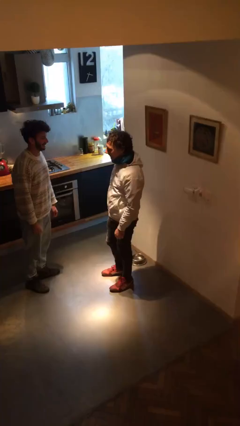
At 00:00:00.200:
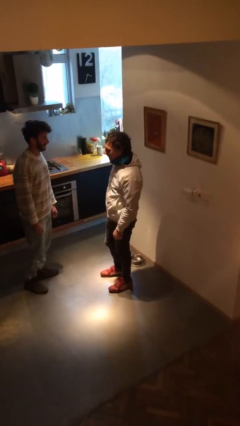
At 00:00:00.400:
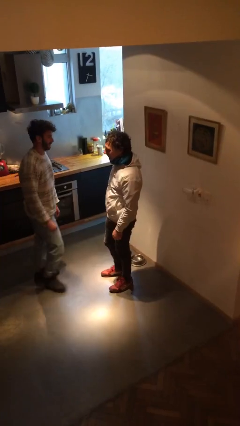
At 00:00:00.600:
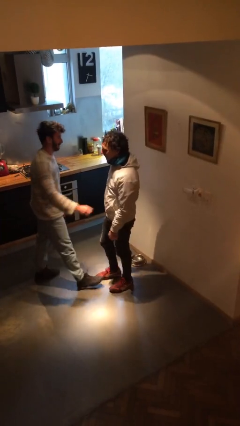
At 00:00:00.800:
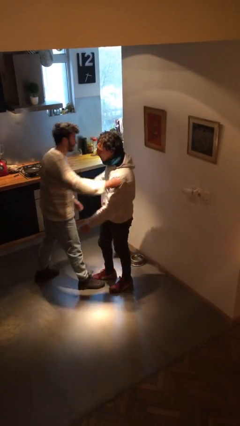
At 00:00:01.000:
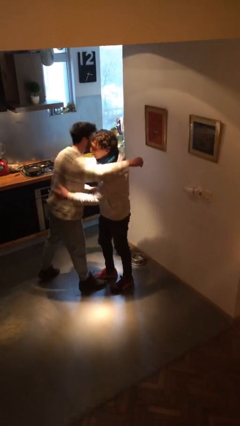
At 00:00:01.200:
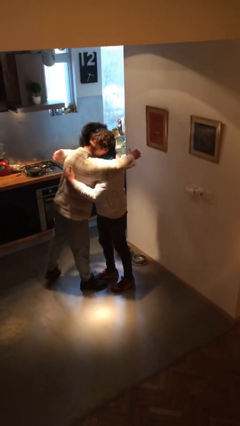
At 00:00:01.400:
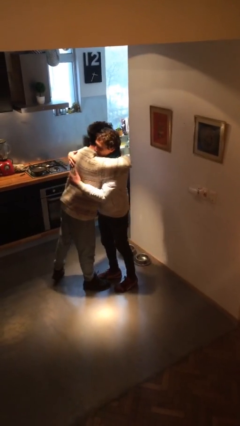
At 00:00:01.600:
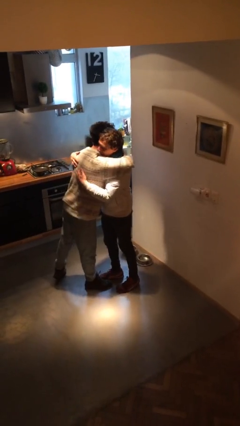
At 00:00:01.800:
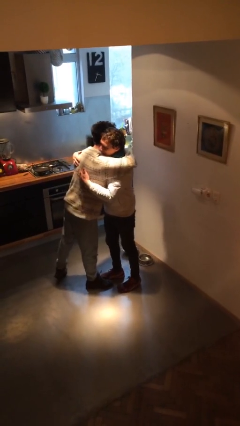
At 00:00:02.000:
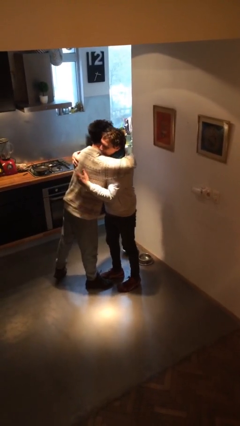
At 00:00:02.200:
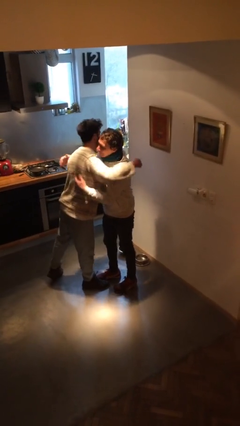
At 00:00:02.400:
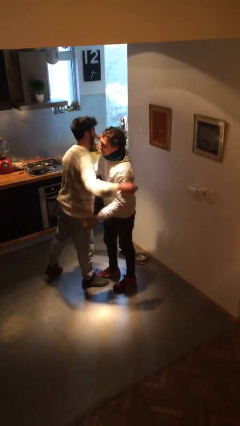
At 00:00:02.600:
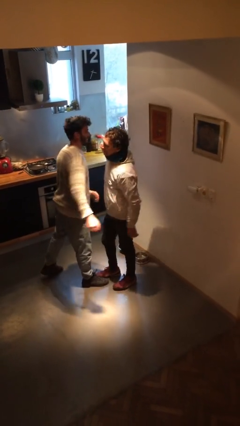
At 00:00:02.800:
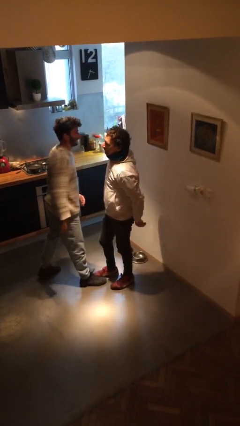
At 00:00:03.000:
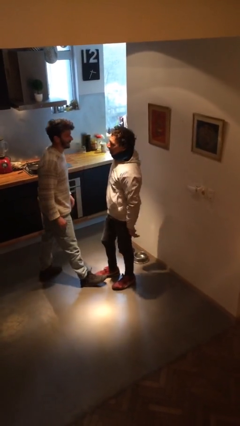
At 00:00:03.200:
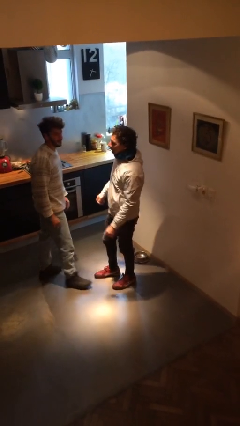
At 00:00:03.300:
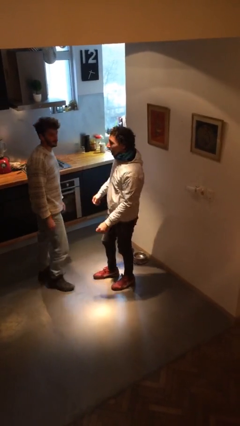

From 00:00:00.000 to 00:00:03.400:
person embraces person

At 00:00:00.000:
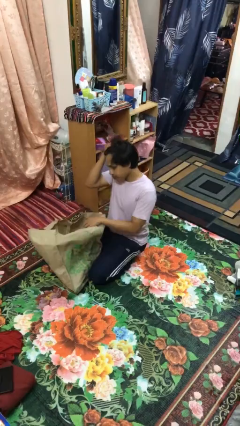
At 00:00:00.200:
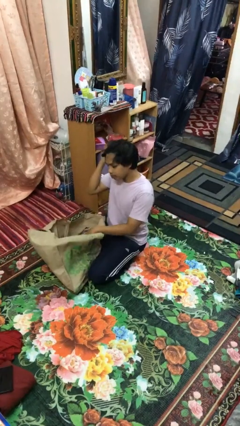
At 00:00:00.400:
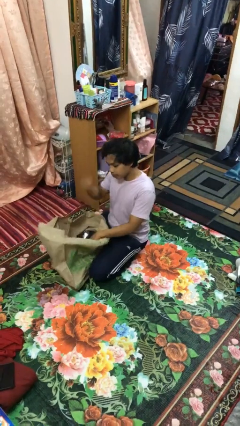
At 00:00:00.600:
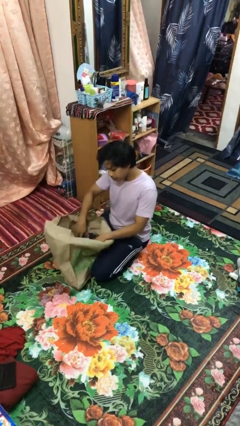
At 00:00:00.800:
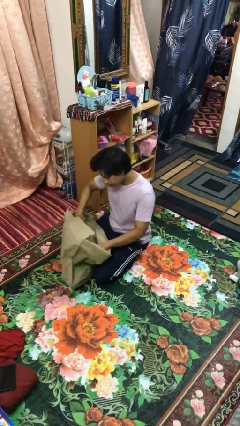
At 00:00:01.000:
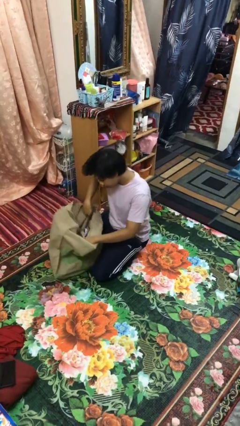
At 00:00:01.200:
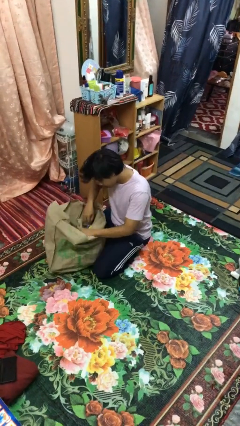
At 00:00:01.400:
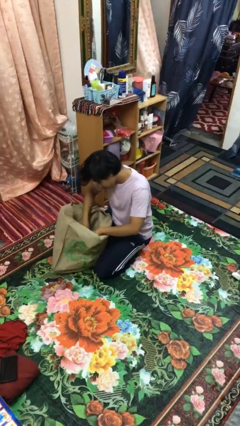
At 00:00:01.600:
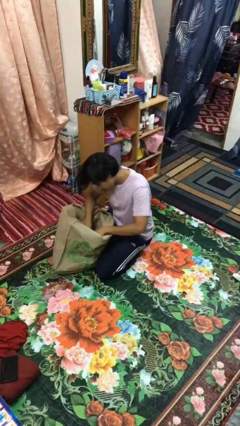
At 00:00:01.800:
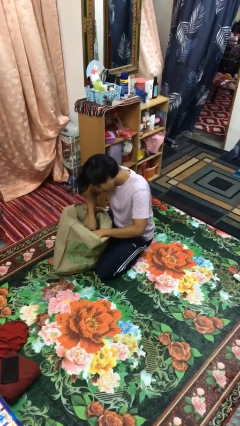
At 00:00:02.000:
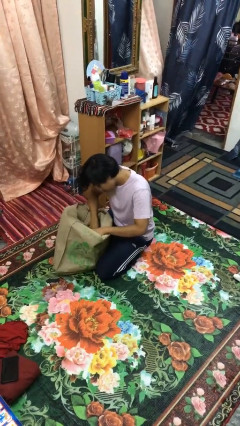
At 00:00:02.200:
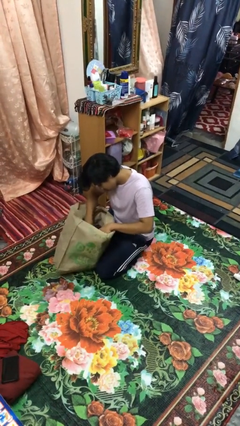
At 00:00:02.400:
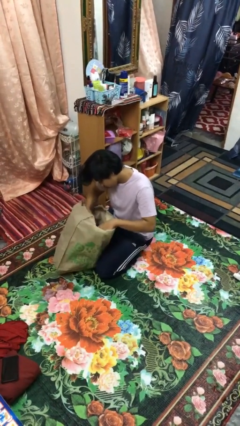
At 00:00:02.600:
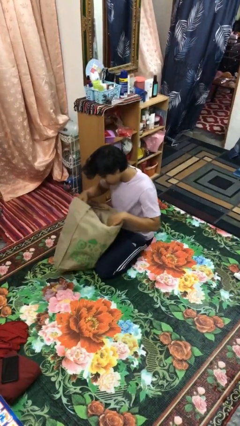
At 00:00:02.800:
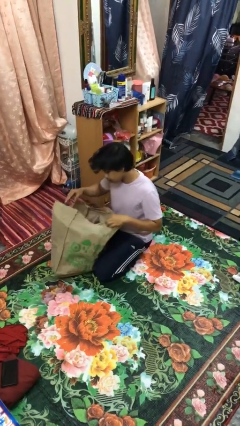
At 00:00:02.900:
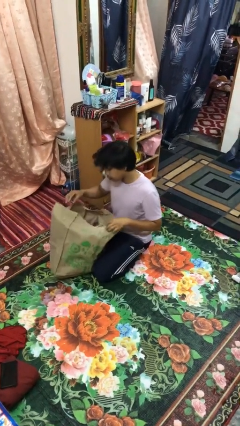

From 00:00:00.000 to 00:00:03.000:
person searches in bag

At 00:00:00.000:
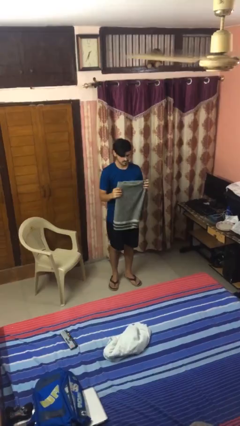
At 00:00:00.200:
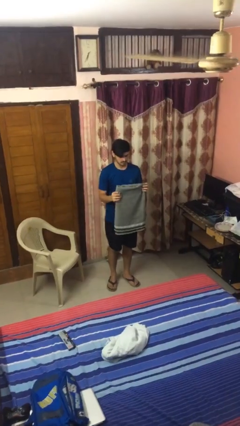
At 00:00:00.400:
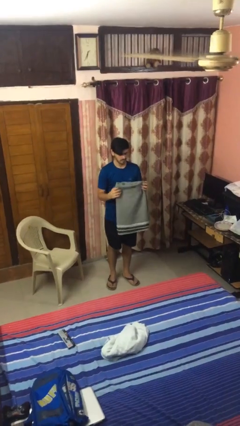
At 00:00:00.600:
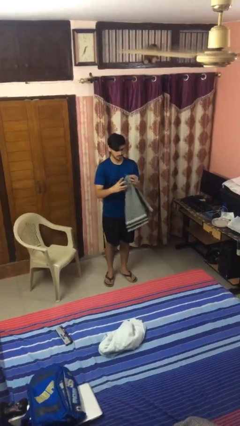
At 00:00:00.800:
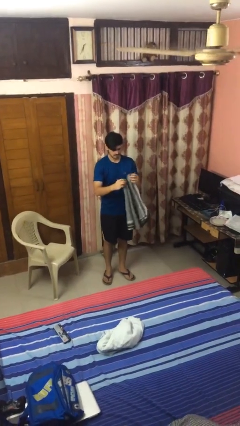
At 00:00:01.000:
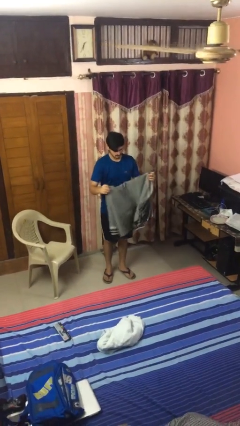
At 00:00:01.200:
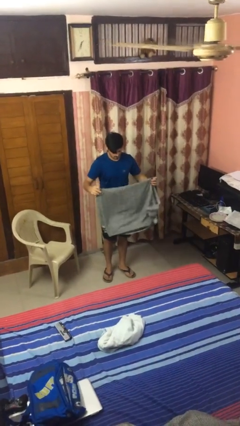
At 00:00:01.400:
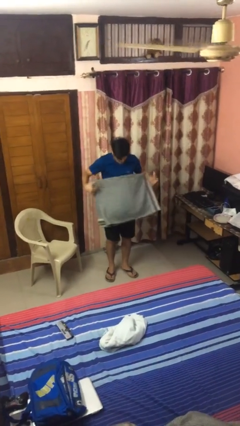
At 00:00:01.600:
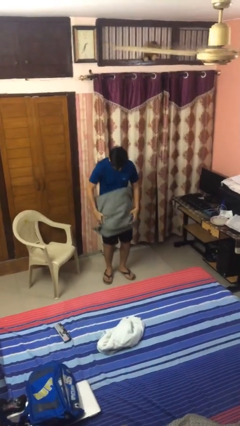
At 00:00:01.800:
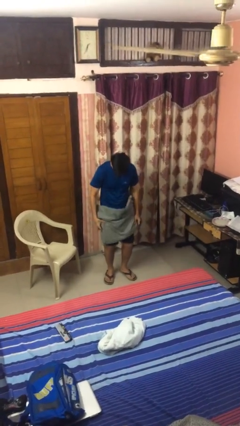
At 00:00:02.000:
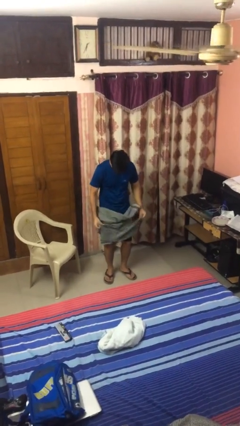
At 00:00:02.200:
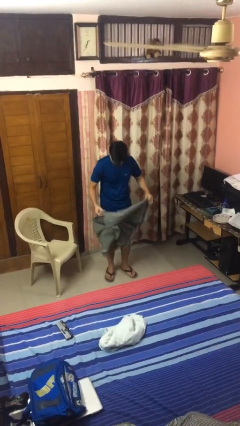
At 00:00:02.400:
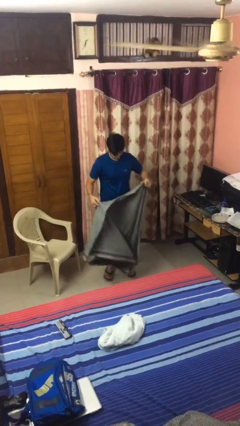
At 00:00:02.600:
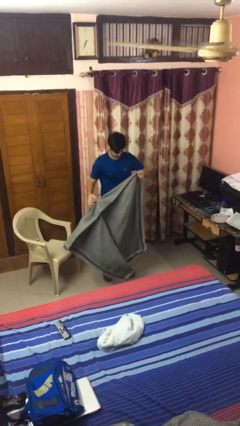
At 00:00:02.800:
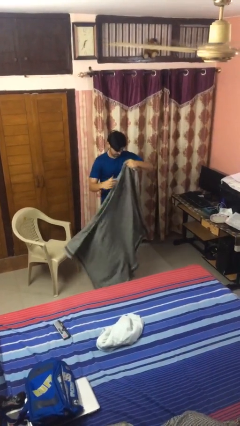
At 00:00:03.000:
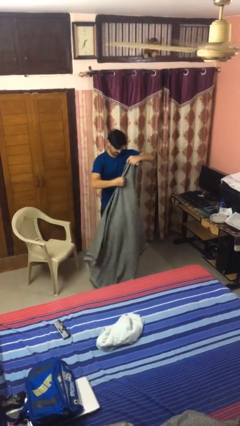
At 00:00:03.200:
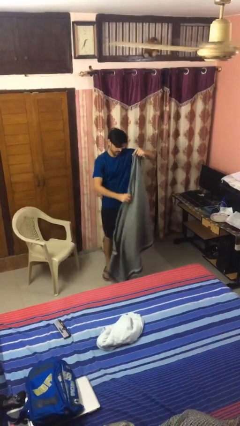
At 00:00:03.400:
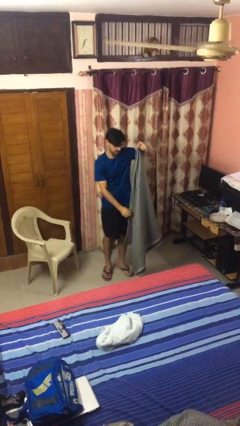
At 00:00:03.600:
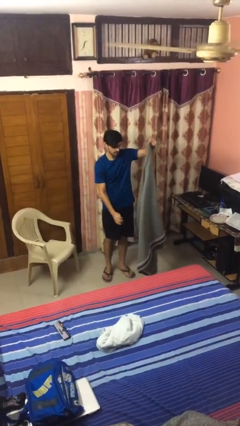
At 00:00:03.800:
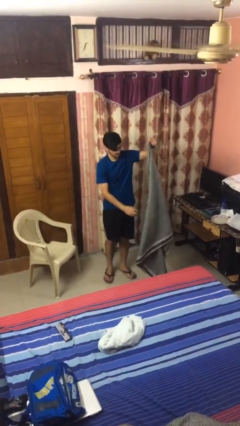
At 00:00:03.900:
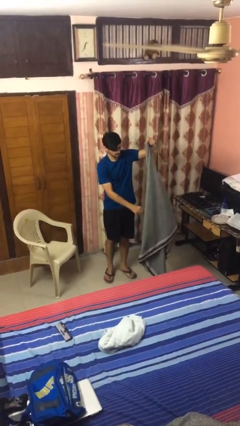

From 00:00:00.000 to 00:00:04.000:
person unfolds blanket

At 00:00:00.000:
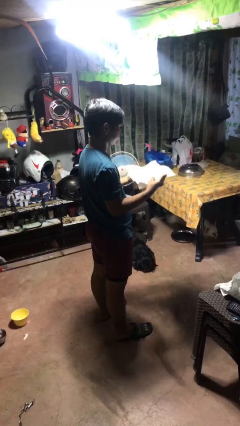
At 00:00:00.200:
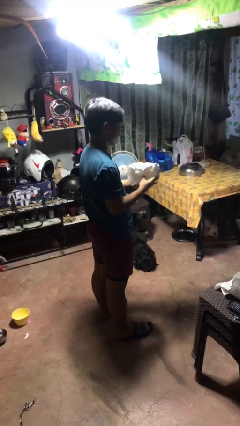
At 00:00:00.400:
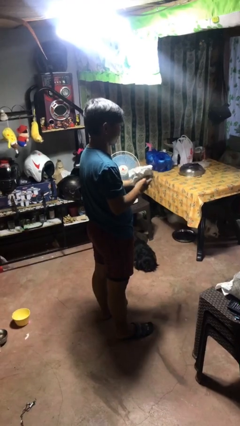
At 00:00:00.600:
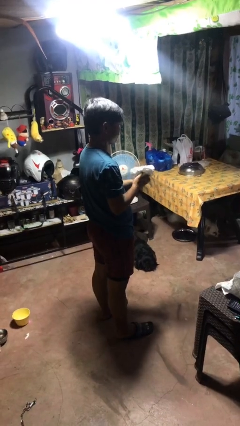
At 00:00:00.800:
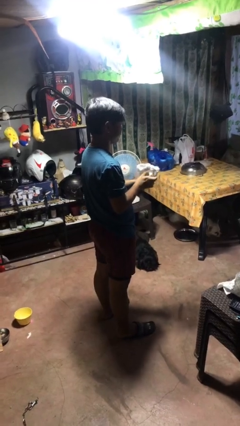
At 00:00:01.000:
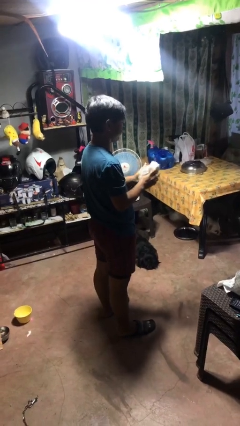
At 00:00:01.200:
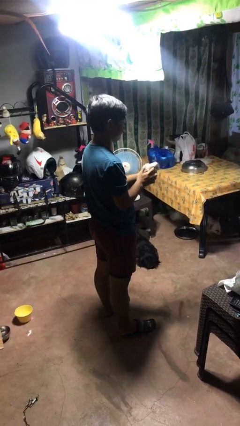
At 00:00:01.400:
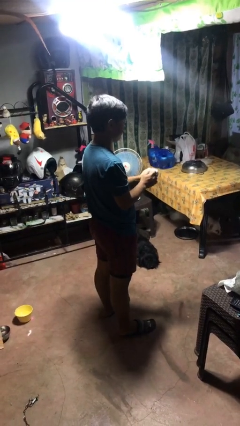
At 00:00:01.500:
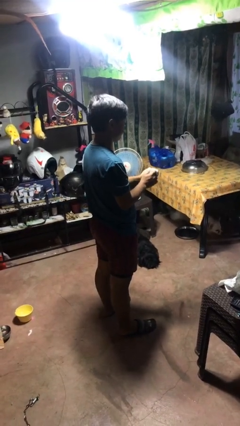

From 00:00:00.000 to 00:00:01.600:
person crumples paper

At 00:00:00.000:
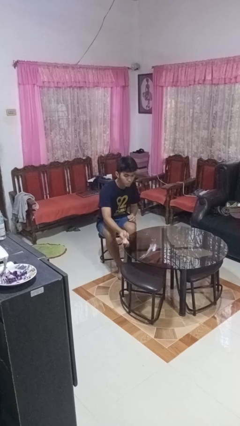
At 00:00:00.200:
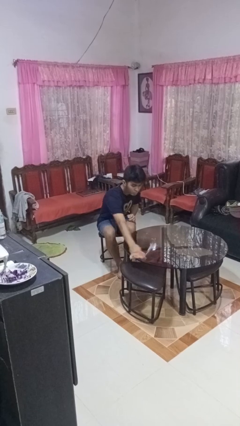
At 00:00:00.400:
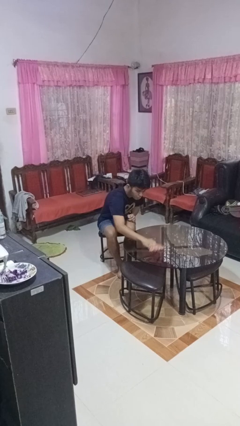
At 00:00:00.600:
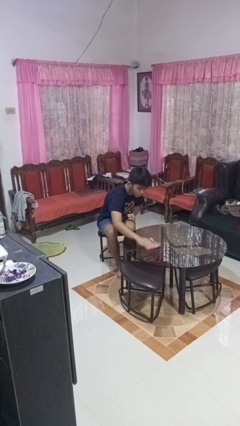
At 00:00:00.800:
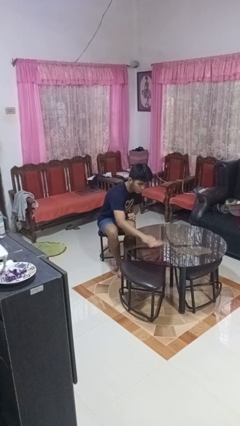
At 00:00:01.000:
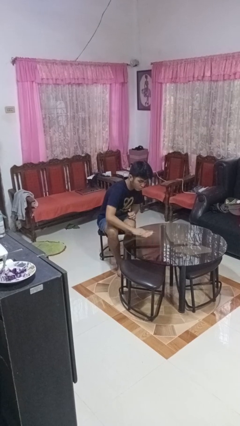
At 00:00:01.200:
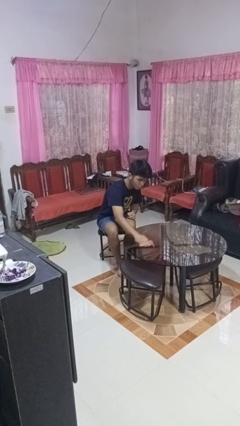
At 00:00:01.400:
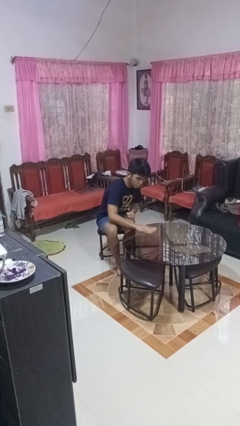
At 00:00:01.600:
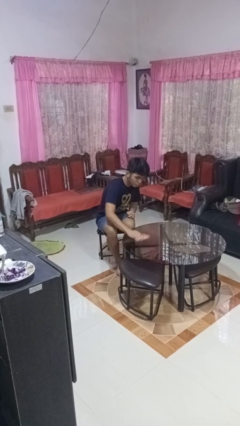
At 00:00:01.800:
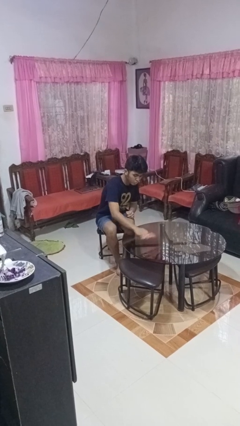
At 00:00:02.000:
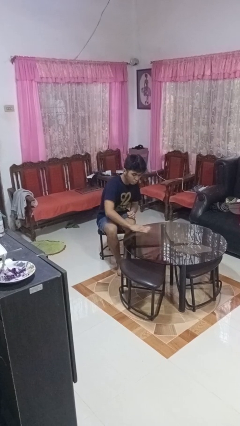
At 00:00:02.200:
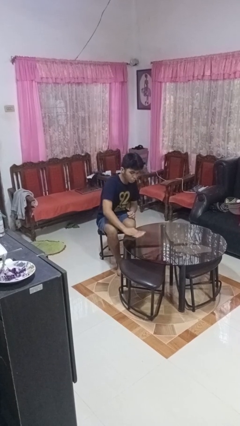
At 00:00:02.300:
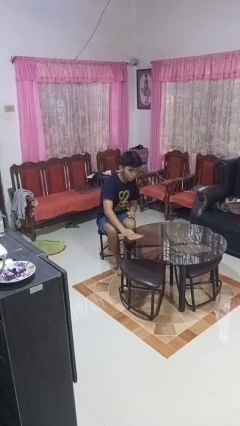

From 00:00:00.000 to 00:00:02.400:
person cleans table with rag

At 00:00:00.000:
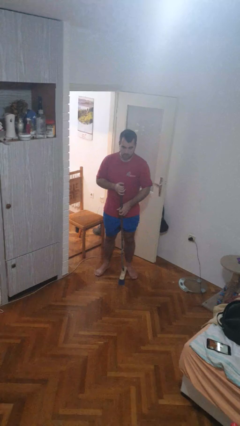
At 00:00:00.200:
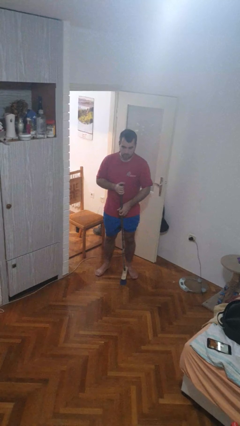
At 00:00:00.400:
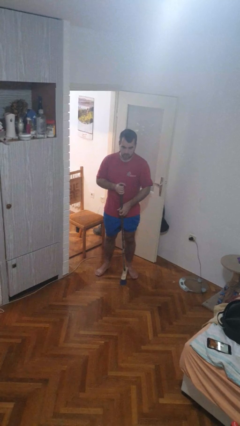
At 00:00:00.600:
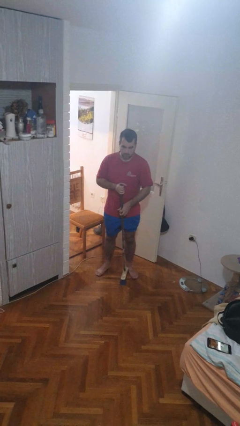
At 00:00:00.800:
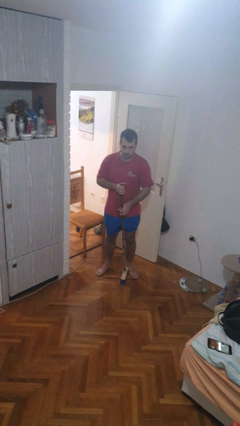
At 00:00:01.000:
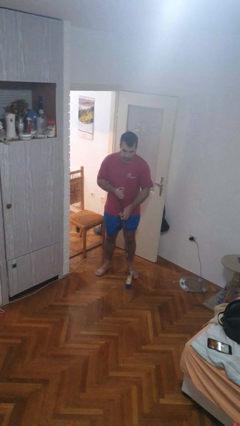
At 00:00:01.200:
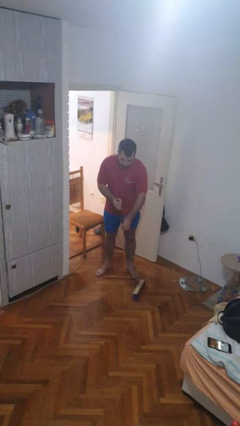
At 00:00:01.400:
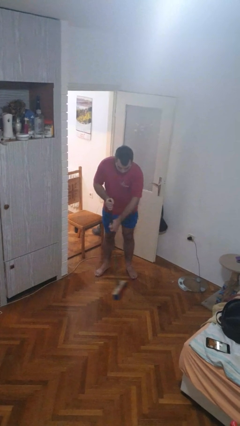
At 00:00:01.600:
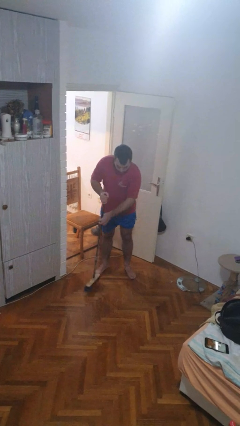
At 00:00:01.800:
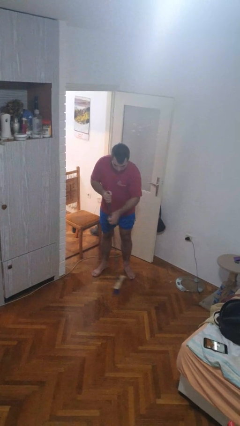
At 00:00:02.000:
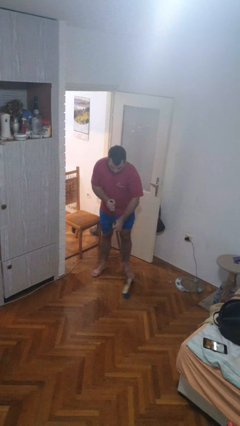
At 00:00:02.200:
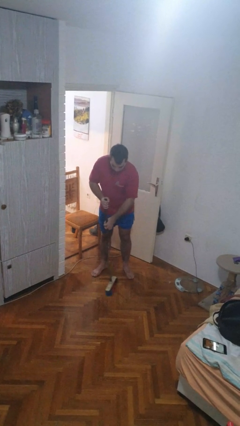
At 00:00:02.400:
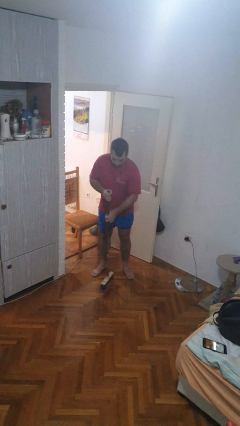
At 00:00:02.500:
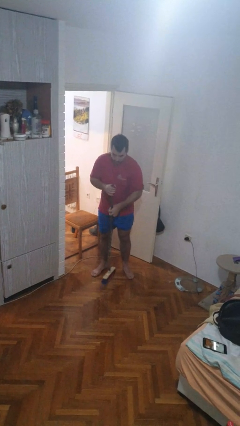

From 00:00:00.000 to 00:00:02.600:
person sweeps floor
